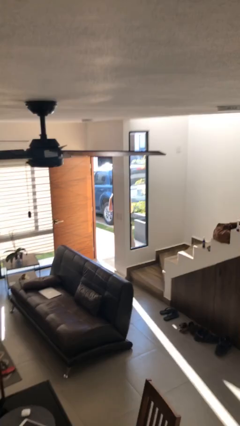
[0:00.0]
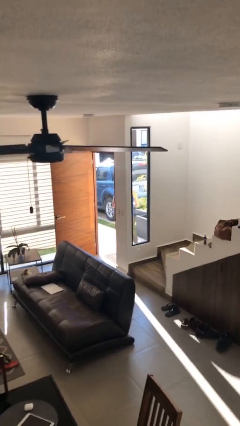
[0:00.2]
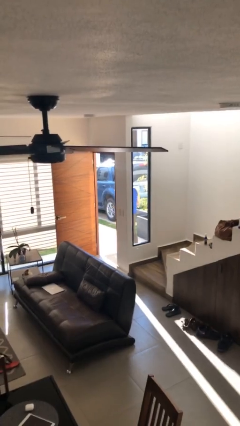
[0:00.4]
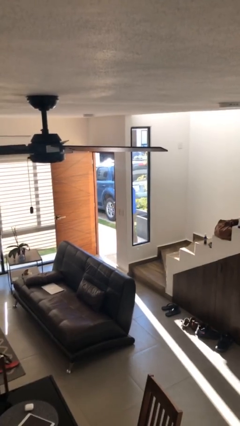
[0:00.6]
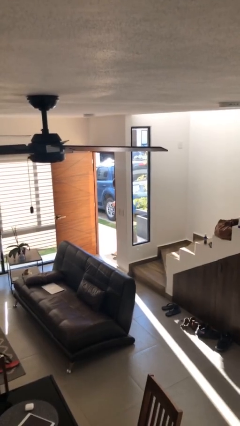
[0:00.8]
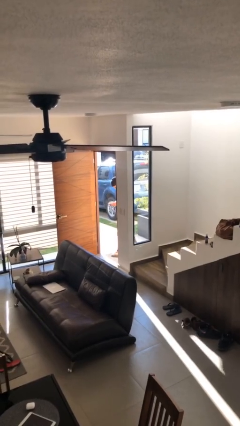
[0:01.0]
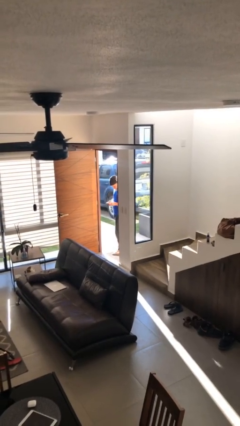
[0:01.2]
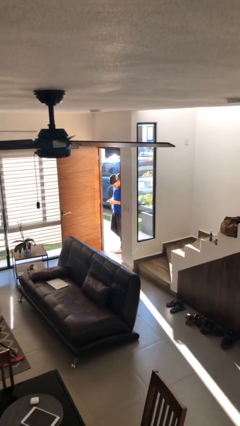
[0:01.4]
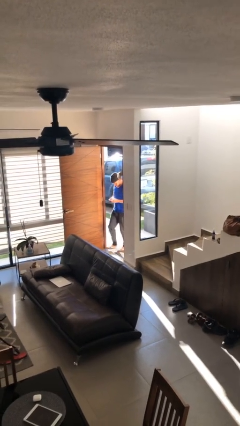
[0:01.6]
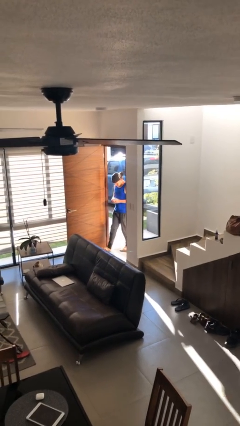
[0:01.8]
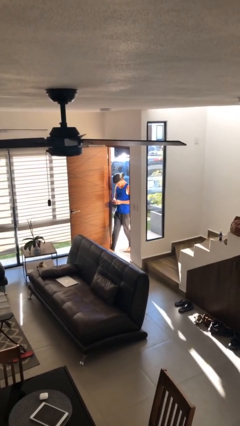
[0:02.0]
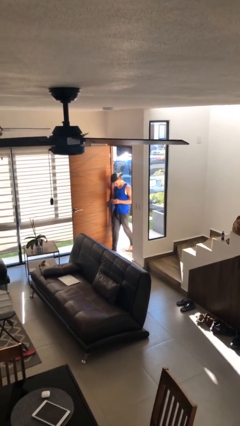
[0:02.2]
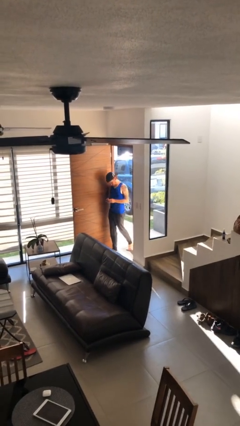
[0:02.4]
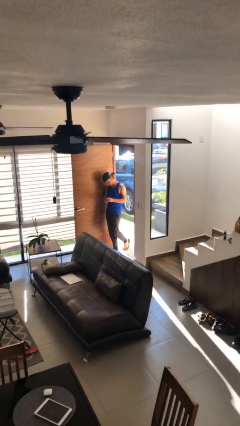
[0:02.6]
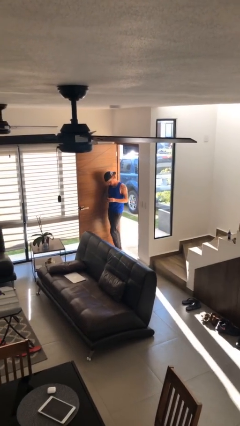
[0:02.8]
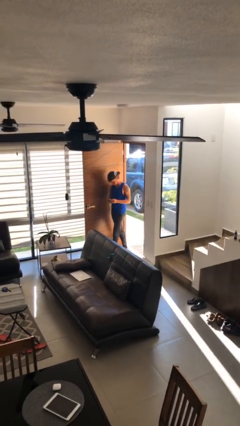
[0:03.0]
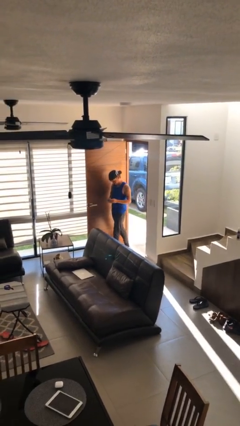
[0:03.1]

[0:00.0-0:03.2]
person enters scene through structure

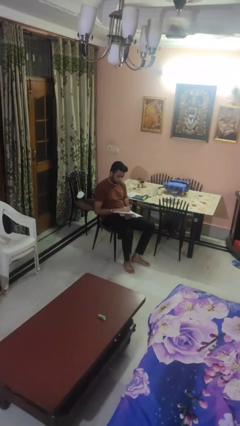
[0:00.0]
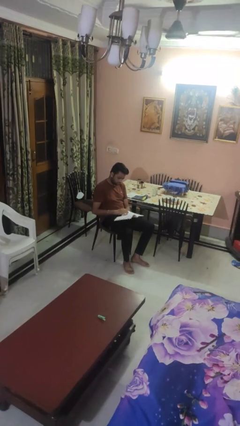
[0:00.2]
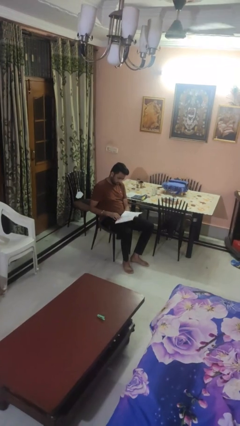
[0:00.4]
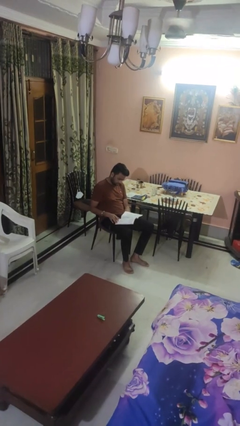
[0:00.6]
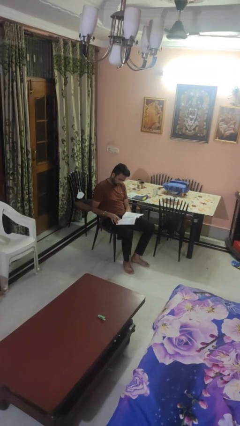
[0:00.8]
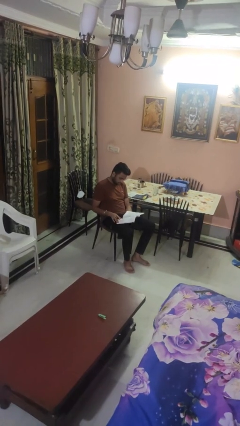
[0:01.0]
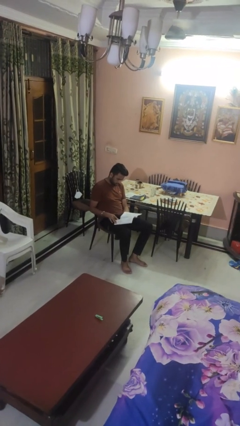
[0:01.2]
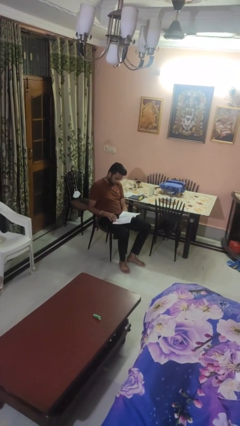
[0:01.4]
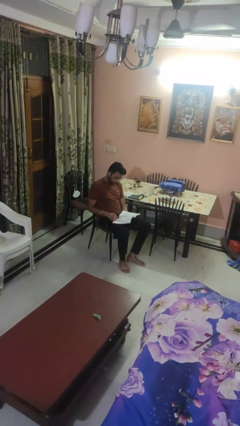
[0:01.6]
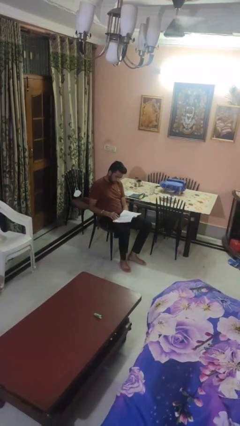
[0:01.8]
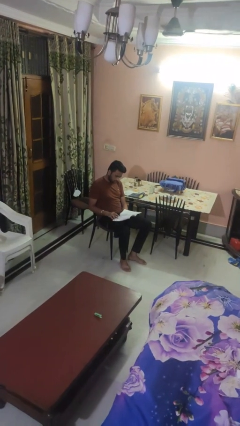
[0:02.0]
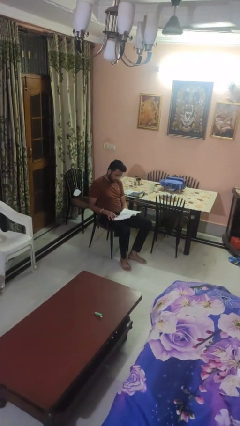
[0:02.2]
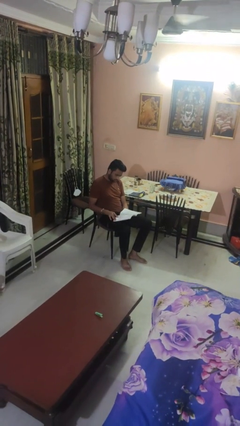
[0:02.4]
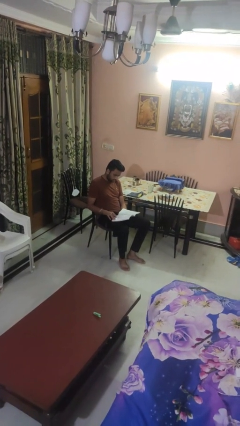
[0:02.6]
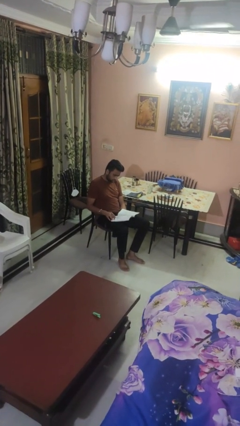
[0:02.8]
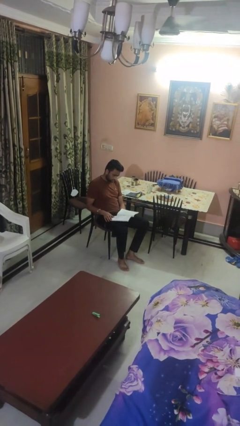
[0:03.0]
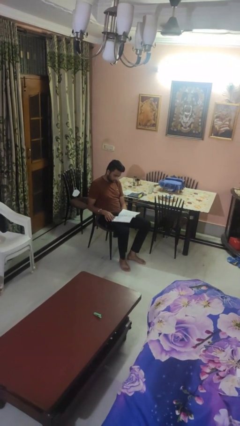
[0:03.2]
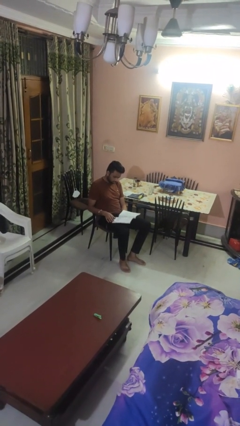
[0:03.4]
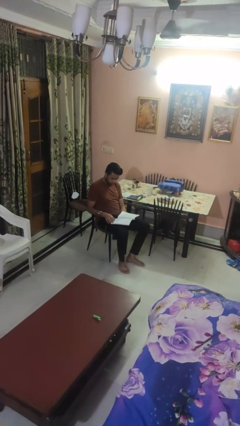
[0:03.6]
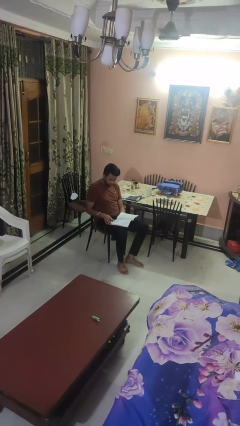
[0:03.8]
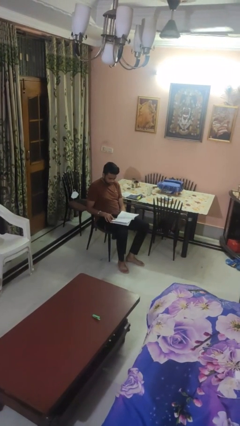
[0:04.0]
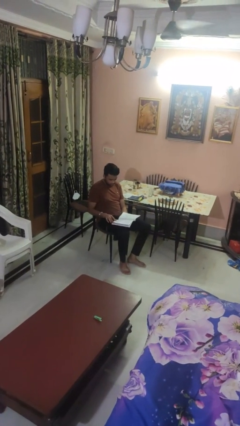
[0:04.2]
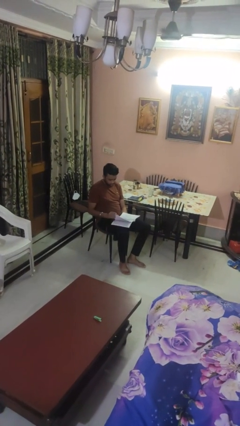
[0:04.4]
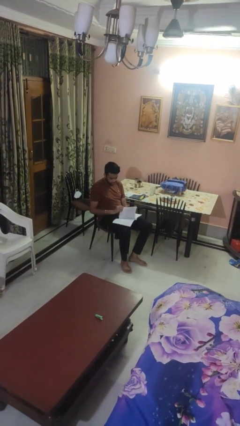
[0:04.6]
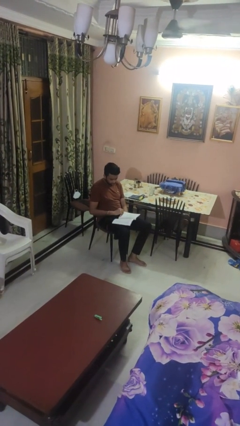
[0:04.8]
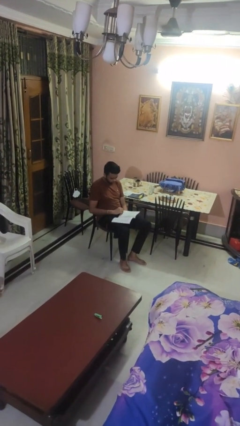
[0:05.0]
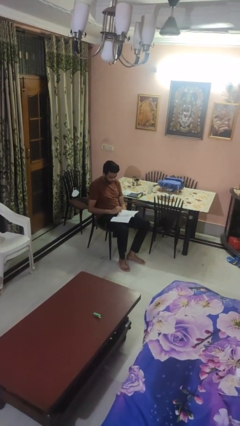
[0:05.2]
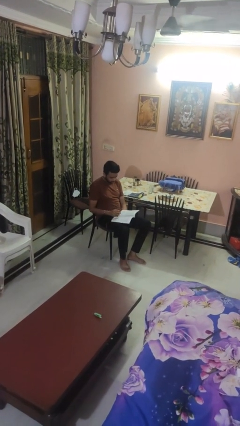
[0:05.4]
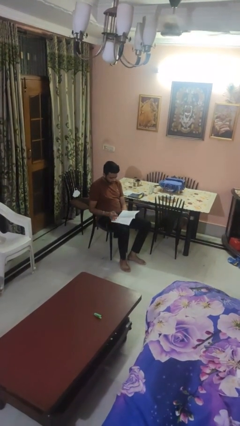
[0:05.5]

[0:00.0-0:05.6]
person reads magazine

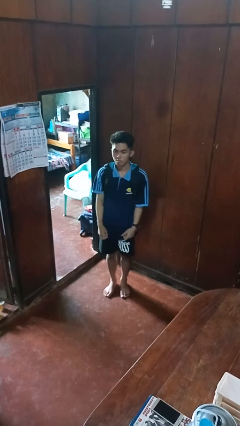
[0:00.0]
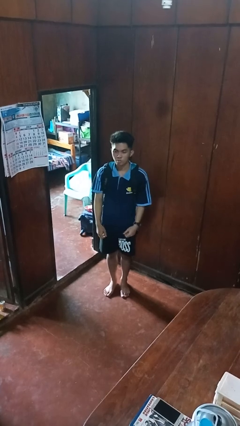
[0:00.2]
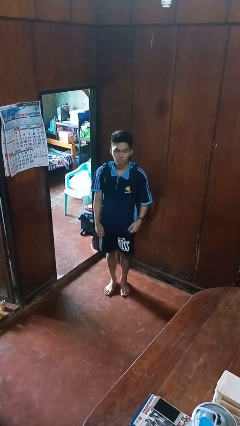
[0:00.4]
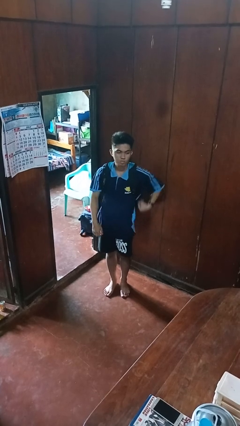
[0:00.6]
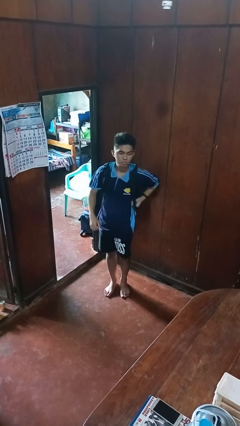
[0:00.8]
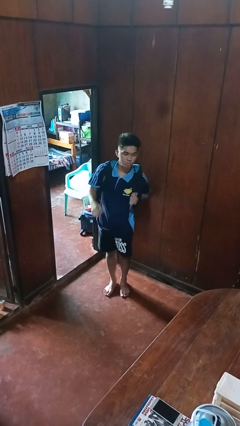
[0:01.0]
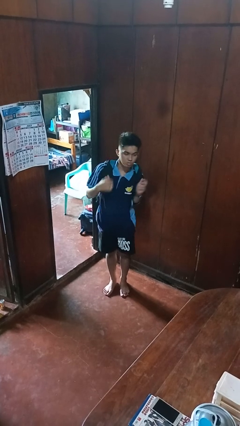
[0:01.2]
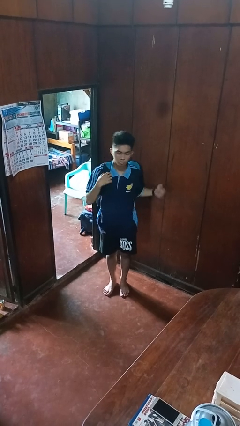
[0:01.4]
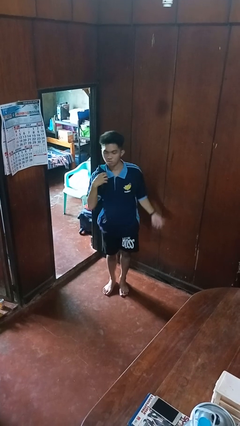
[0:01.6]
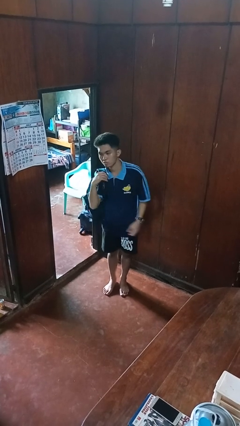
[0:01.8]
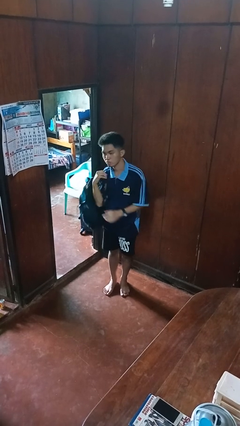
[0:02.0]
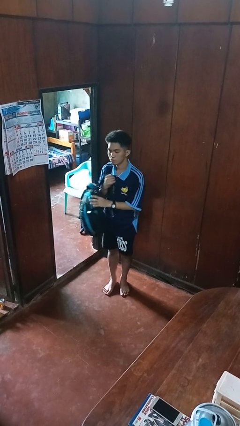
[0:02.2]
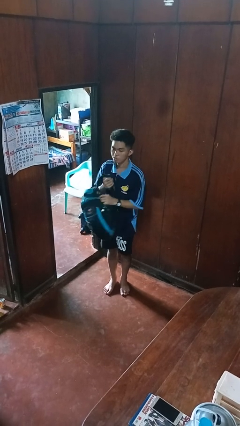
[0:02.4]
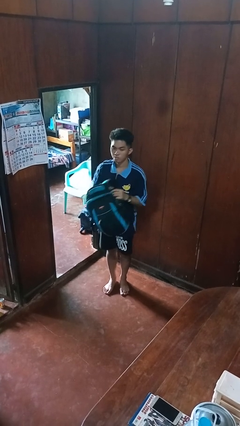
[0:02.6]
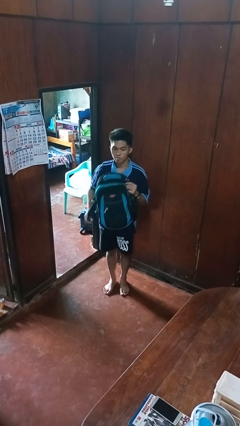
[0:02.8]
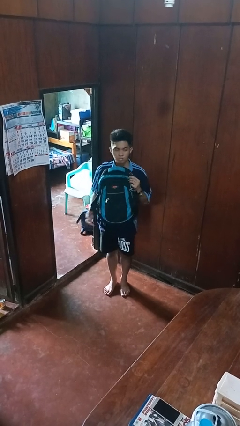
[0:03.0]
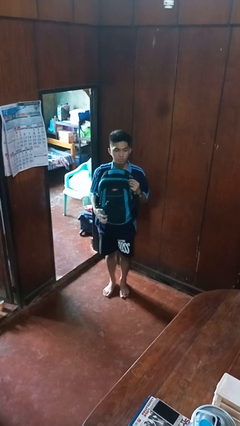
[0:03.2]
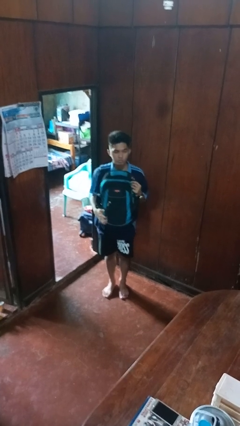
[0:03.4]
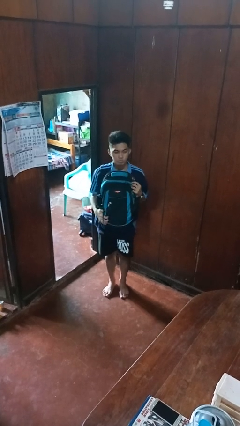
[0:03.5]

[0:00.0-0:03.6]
person takes off backpack

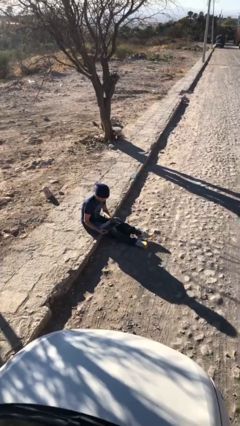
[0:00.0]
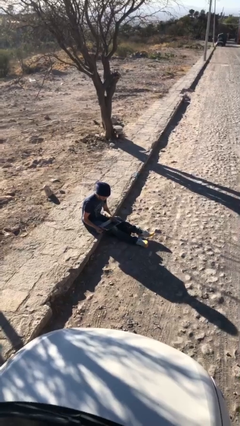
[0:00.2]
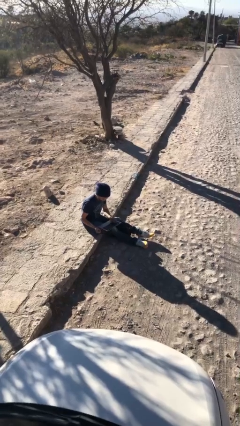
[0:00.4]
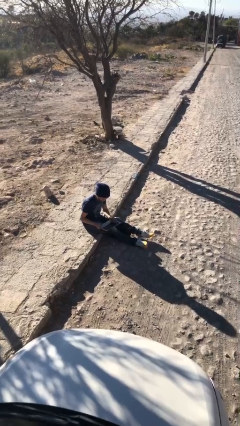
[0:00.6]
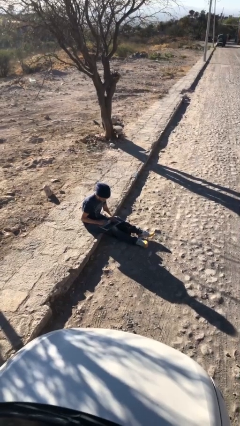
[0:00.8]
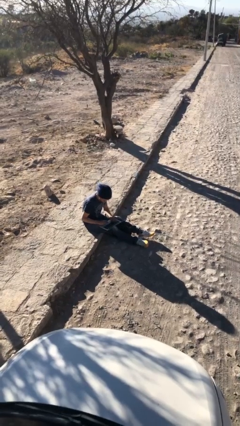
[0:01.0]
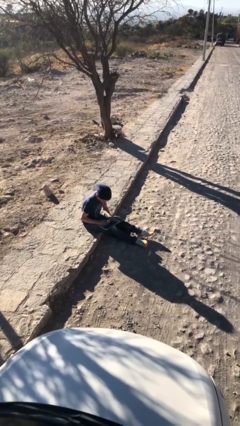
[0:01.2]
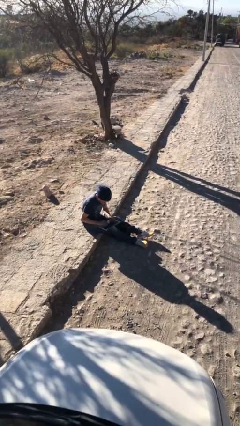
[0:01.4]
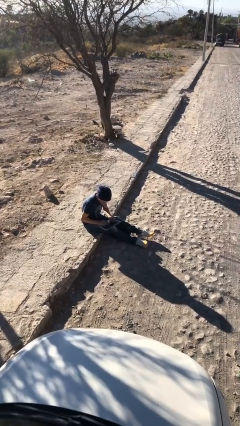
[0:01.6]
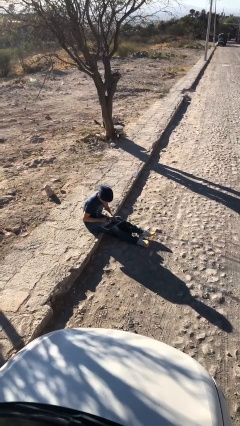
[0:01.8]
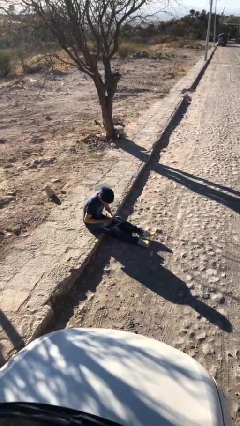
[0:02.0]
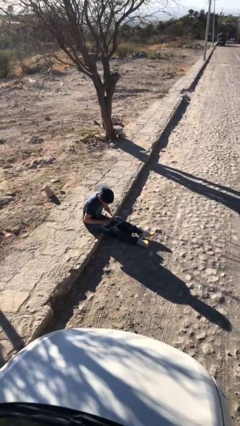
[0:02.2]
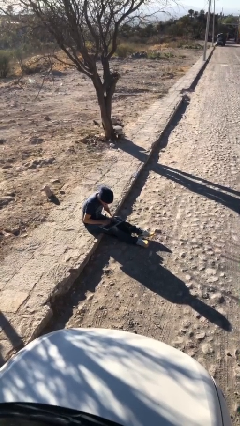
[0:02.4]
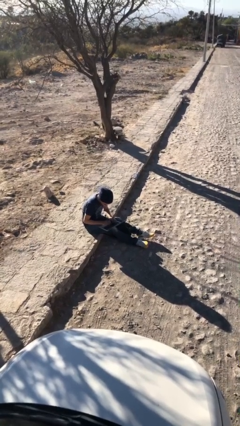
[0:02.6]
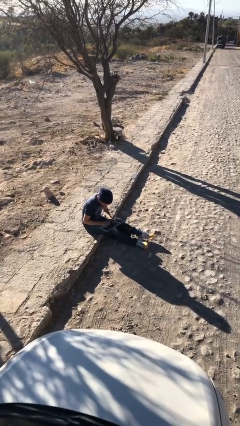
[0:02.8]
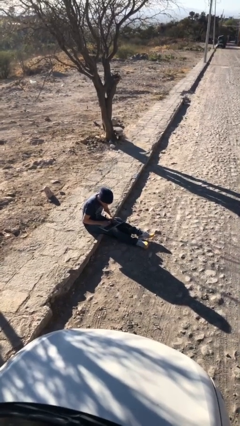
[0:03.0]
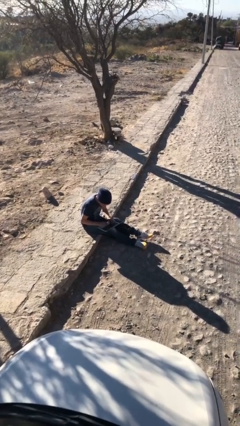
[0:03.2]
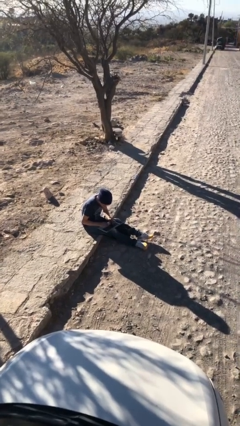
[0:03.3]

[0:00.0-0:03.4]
person interacts with laptop

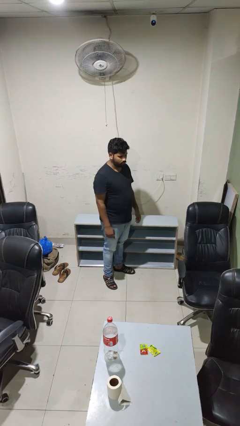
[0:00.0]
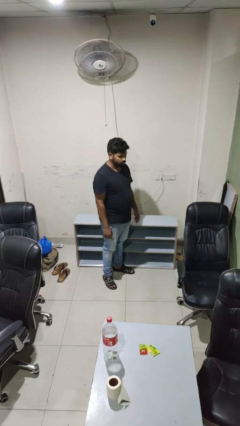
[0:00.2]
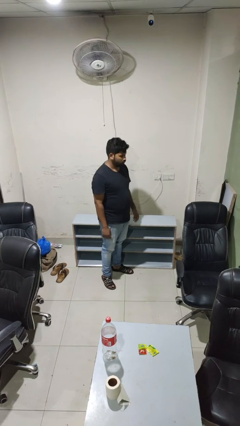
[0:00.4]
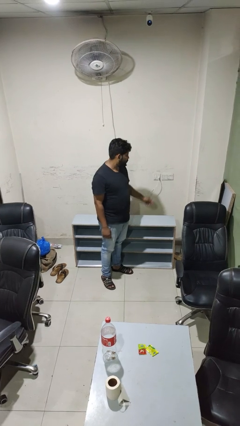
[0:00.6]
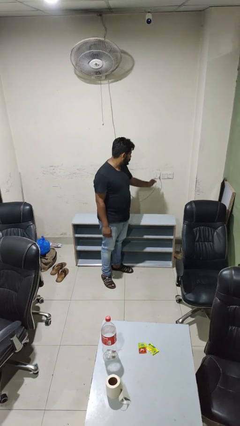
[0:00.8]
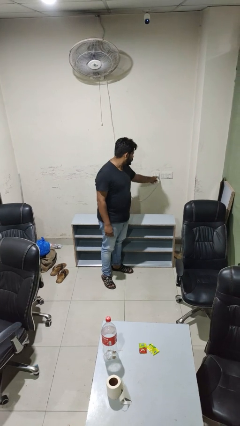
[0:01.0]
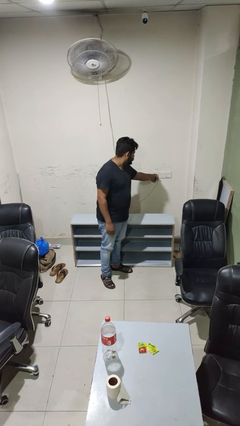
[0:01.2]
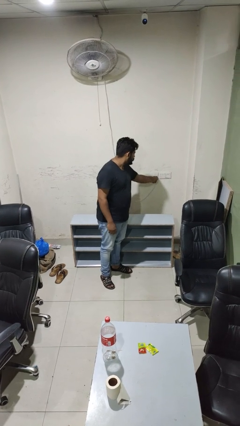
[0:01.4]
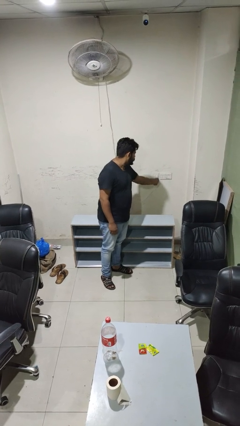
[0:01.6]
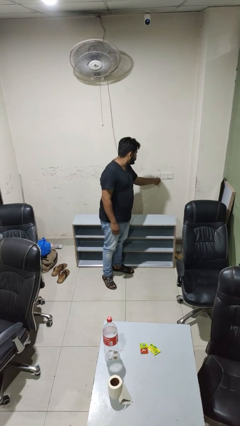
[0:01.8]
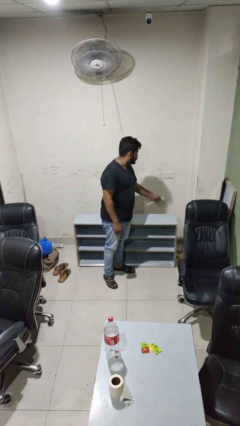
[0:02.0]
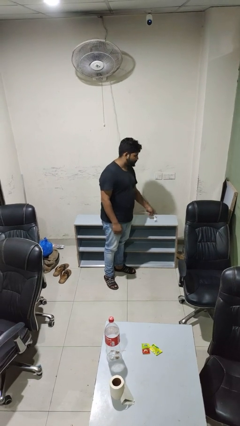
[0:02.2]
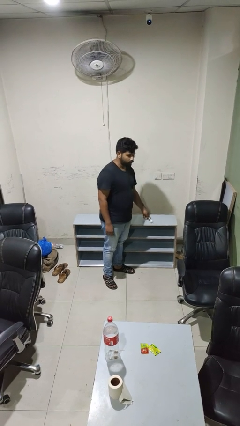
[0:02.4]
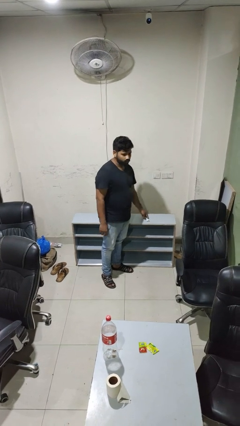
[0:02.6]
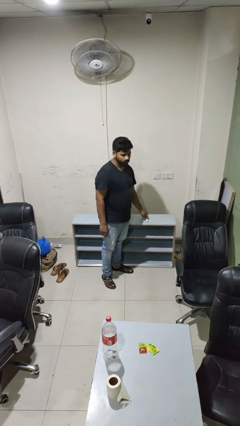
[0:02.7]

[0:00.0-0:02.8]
person unplugs from electrical socket
